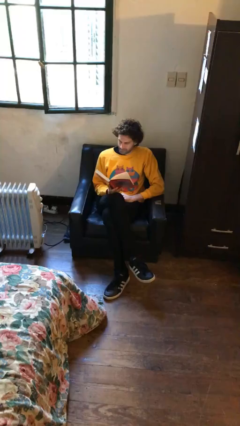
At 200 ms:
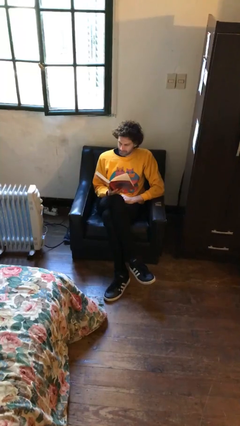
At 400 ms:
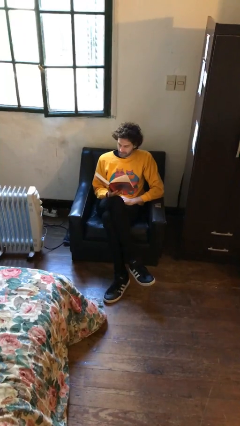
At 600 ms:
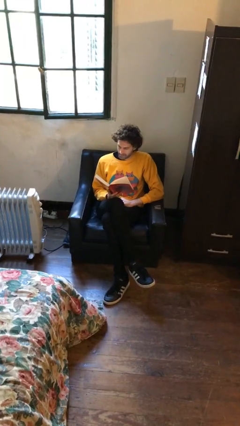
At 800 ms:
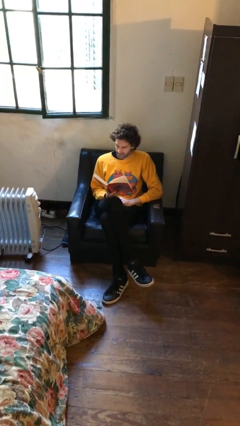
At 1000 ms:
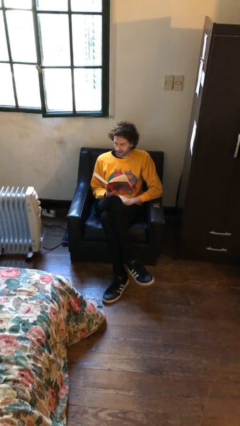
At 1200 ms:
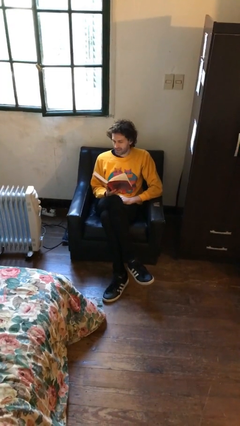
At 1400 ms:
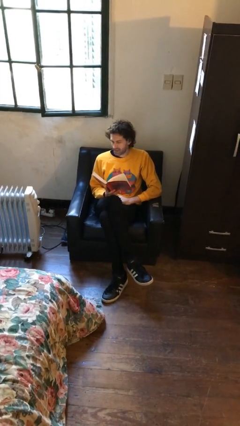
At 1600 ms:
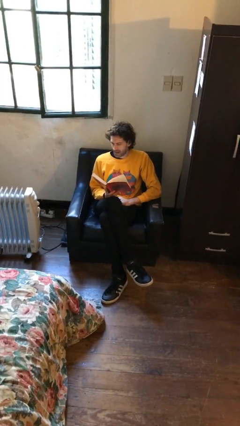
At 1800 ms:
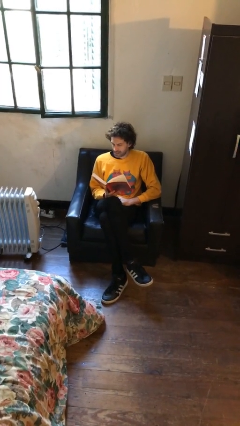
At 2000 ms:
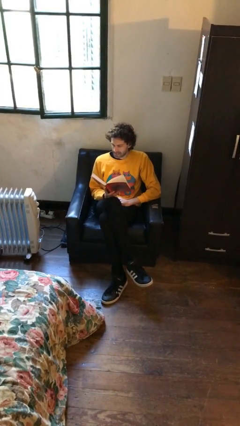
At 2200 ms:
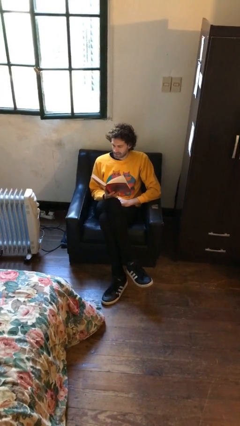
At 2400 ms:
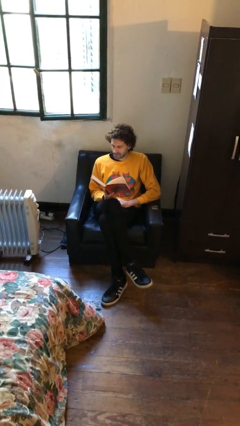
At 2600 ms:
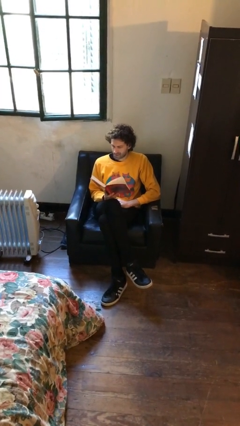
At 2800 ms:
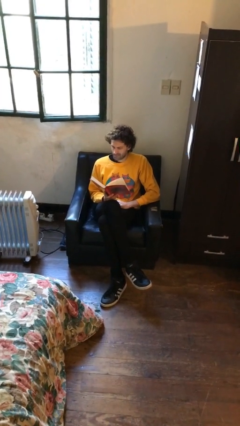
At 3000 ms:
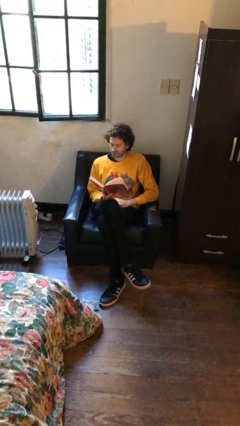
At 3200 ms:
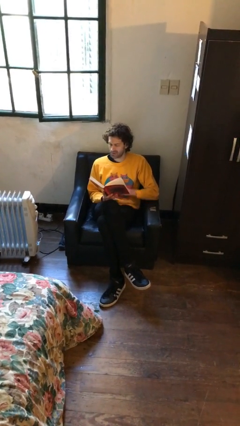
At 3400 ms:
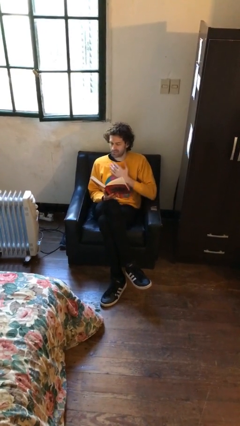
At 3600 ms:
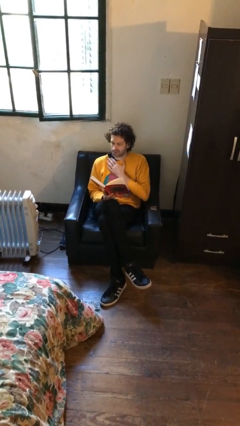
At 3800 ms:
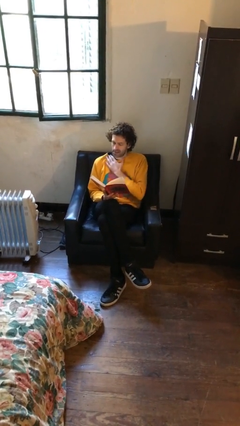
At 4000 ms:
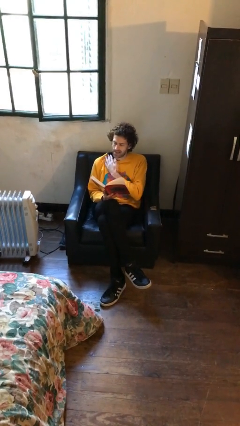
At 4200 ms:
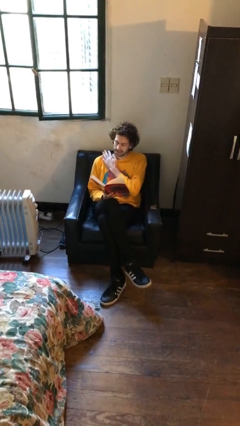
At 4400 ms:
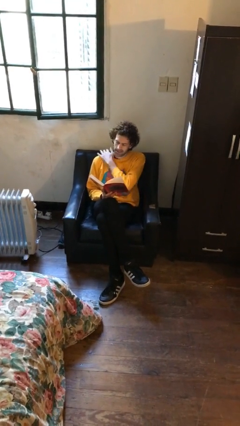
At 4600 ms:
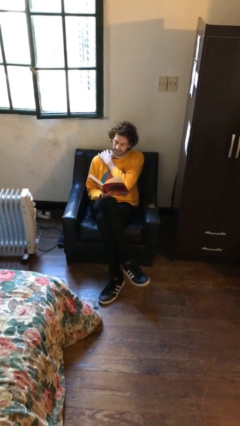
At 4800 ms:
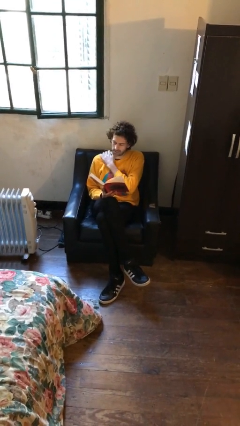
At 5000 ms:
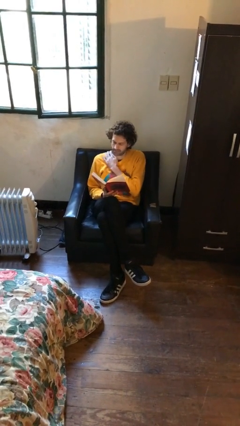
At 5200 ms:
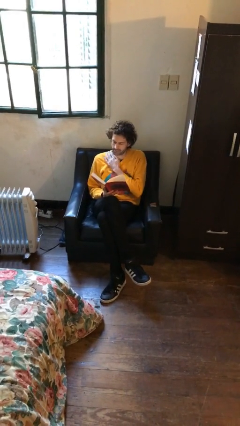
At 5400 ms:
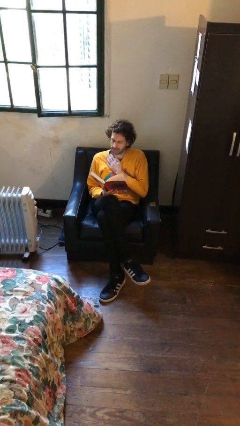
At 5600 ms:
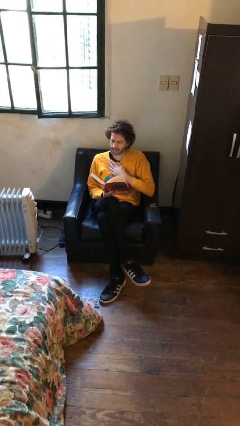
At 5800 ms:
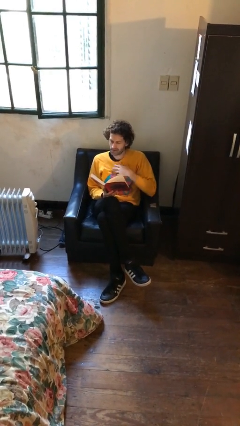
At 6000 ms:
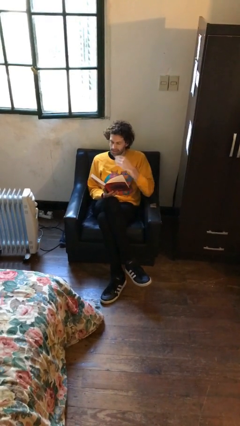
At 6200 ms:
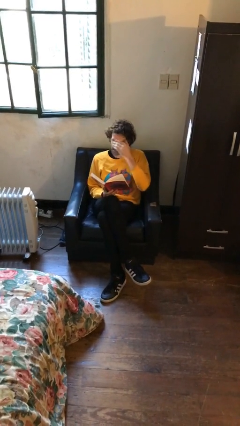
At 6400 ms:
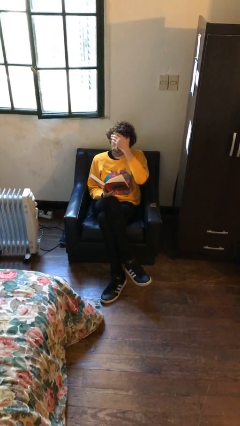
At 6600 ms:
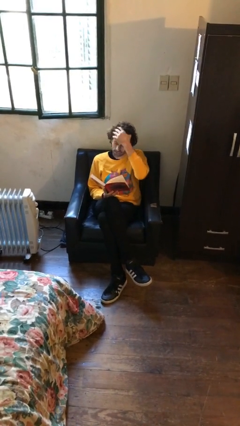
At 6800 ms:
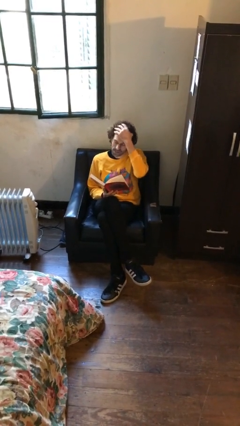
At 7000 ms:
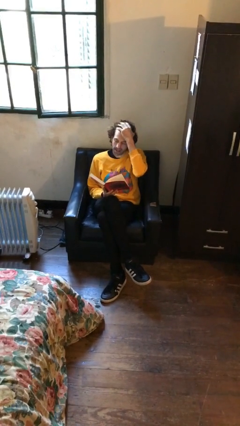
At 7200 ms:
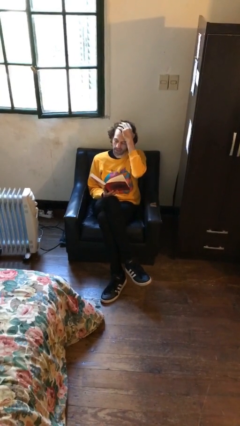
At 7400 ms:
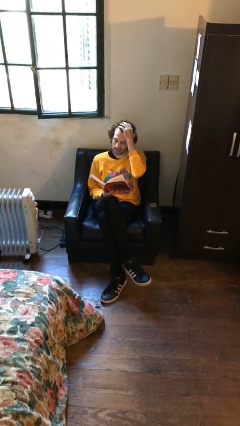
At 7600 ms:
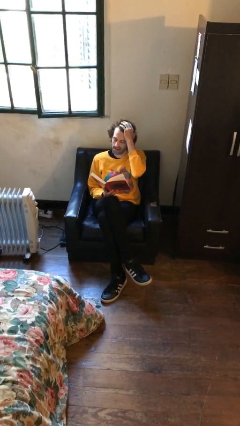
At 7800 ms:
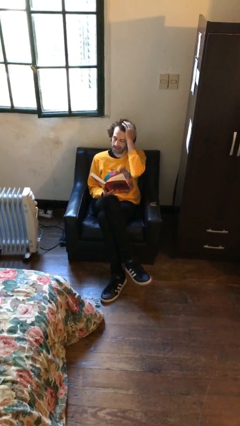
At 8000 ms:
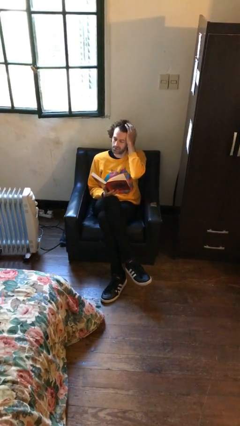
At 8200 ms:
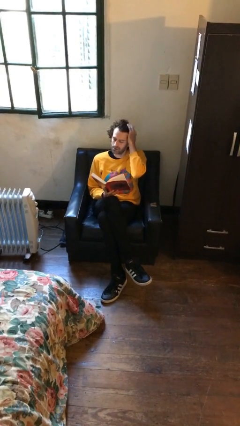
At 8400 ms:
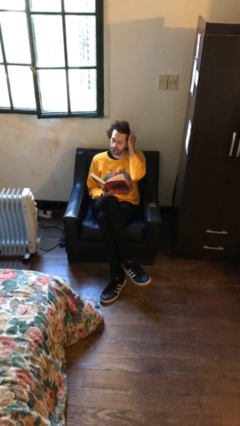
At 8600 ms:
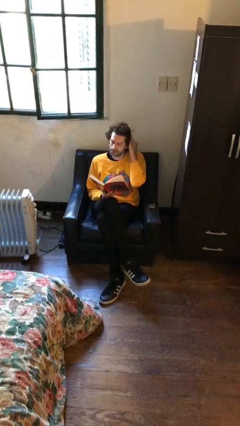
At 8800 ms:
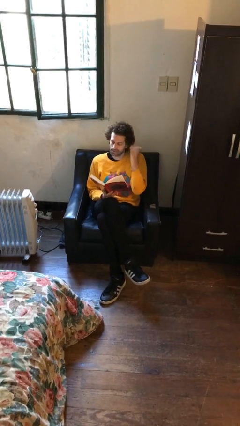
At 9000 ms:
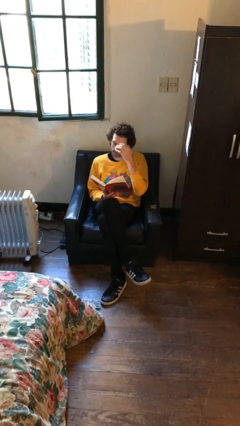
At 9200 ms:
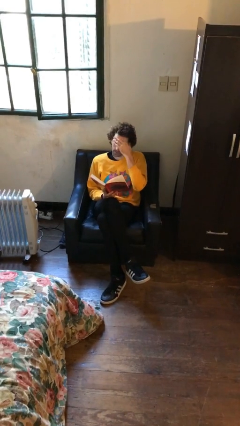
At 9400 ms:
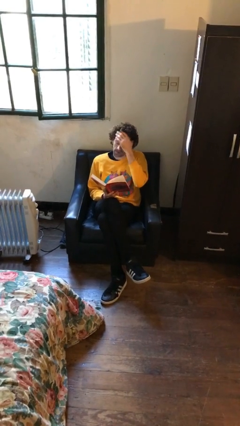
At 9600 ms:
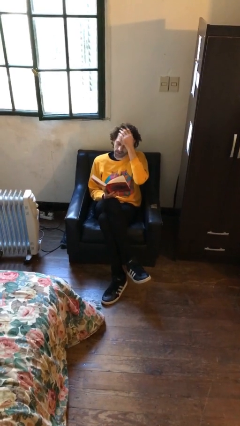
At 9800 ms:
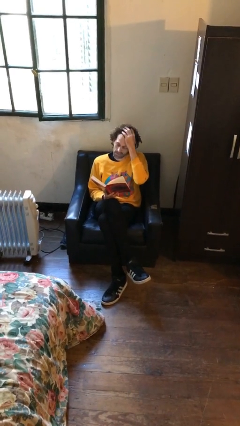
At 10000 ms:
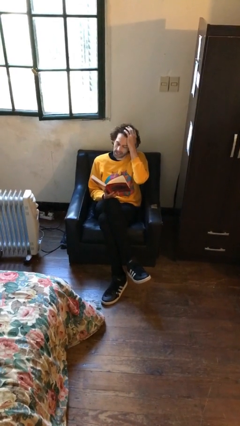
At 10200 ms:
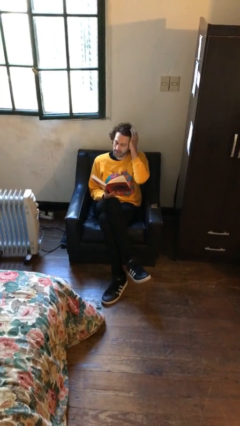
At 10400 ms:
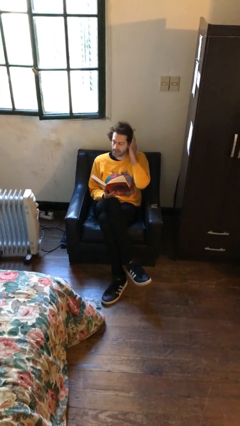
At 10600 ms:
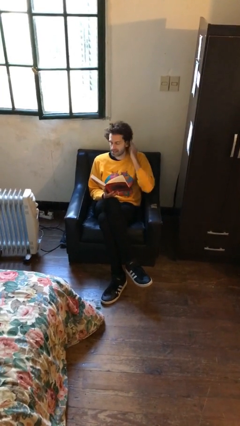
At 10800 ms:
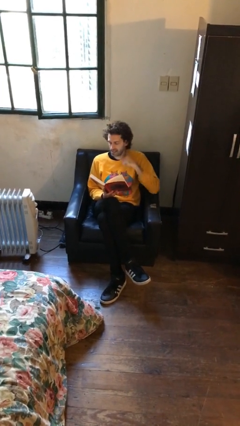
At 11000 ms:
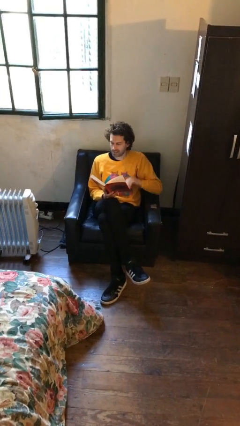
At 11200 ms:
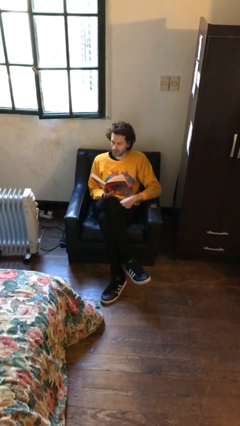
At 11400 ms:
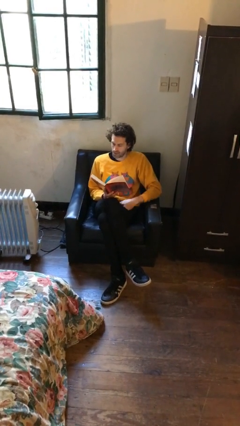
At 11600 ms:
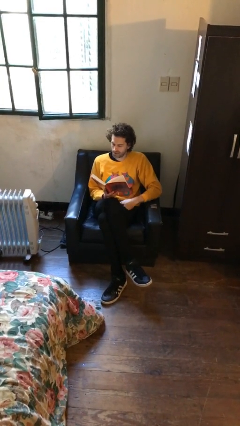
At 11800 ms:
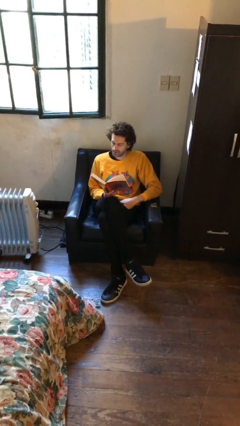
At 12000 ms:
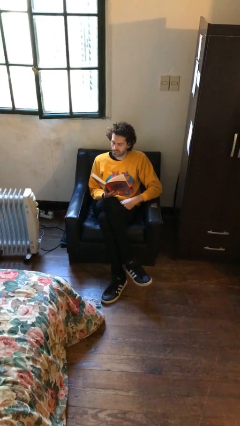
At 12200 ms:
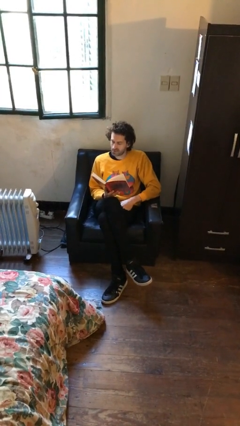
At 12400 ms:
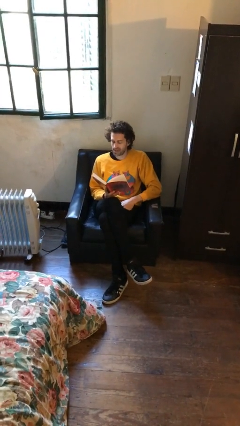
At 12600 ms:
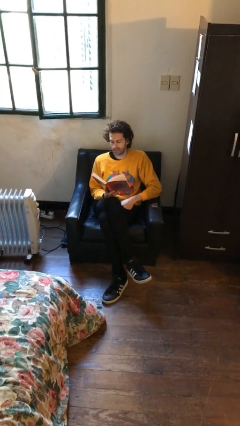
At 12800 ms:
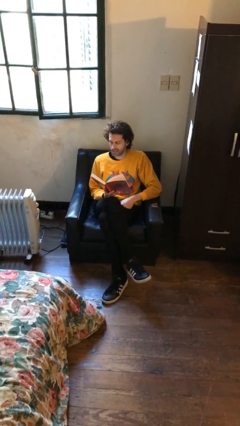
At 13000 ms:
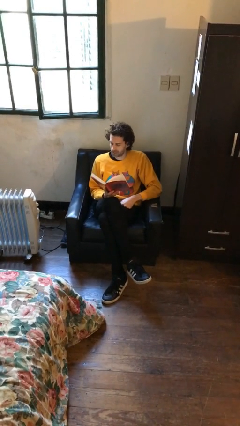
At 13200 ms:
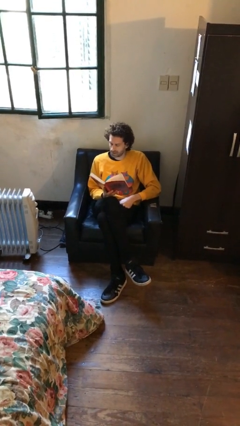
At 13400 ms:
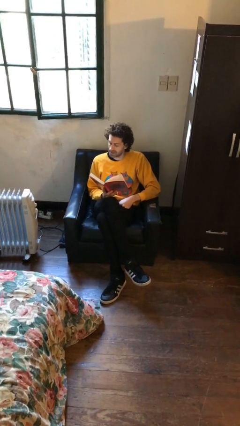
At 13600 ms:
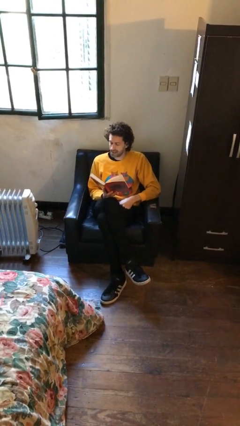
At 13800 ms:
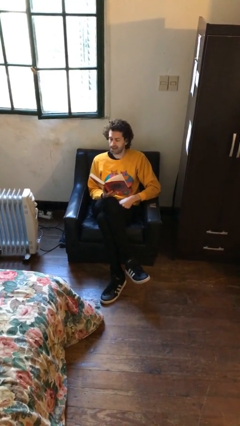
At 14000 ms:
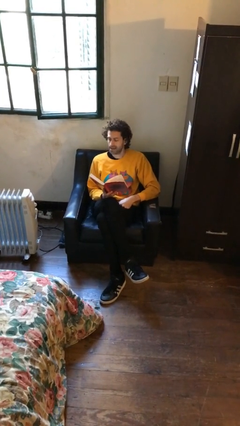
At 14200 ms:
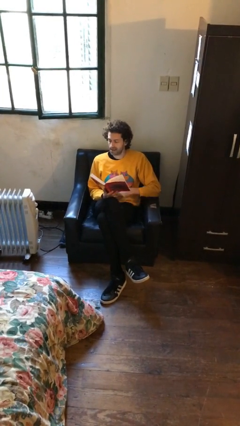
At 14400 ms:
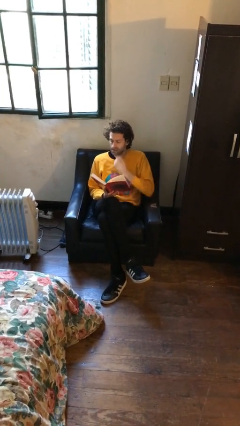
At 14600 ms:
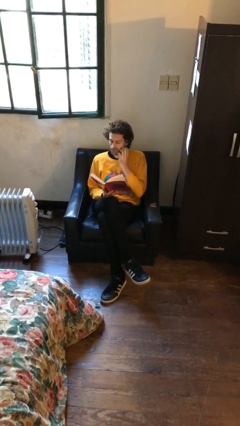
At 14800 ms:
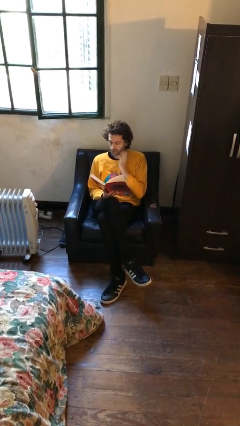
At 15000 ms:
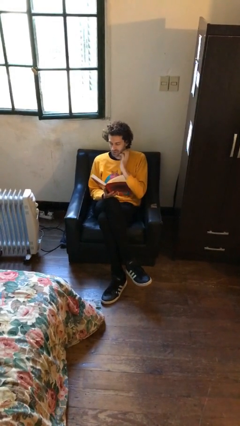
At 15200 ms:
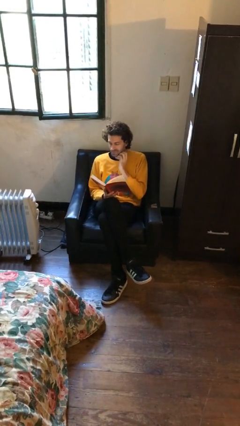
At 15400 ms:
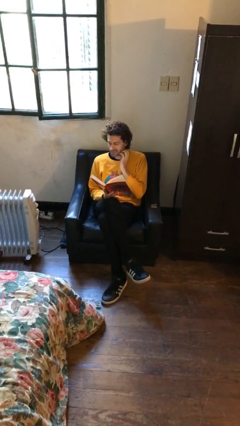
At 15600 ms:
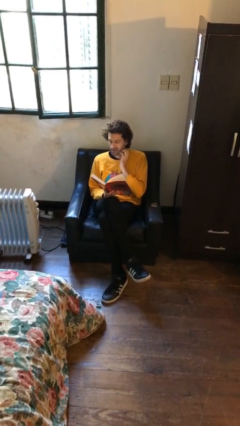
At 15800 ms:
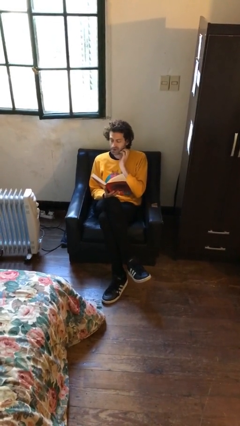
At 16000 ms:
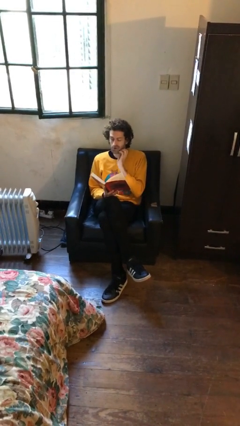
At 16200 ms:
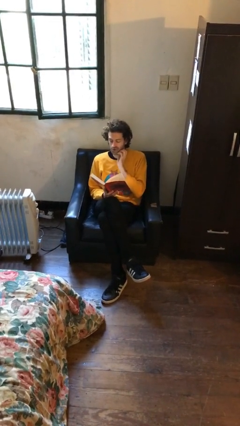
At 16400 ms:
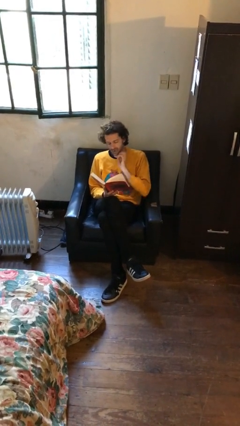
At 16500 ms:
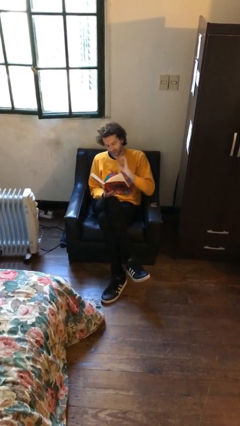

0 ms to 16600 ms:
person reads document

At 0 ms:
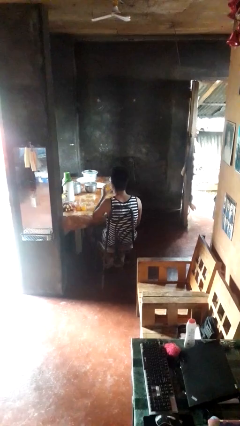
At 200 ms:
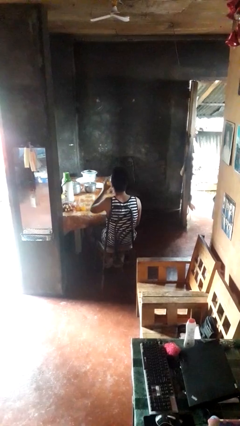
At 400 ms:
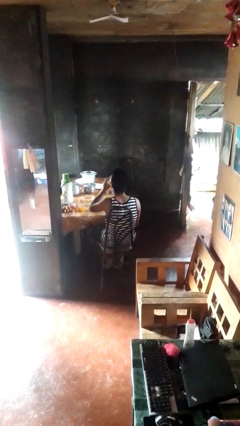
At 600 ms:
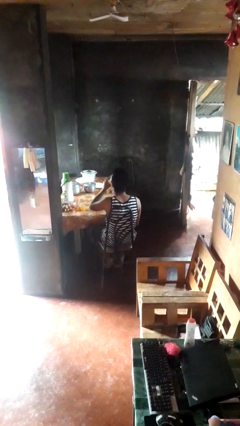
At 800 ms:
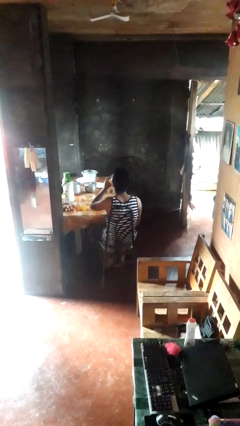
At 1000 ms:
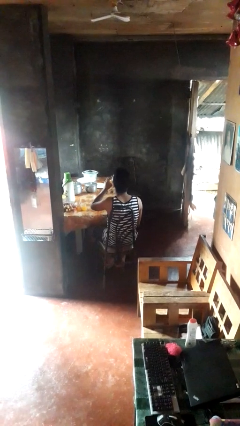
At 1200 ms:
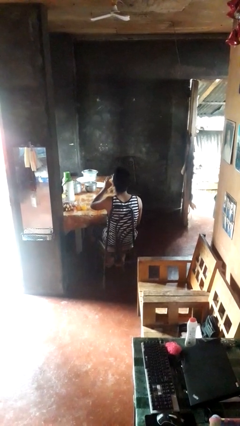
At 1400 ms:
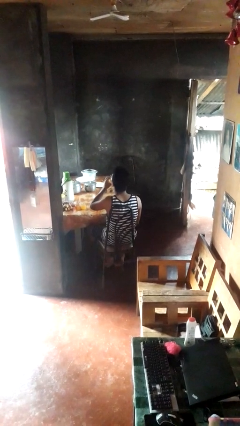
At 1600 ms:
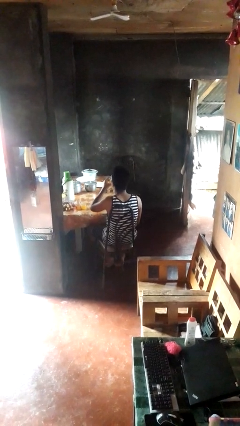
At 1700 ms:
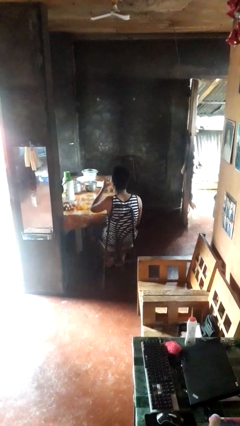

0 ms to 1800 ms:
person drinks from shotglass
